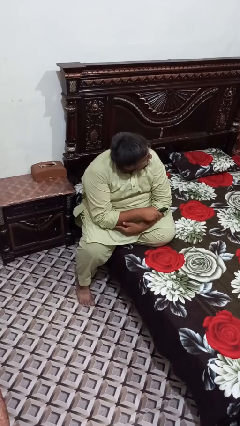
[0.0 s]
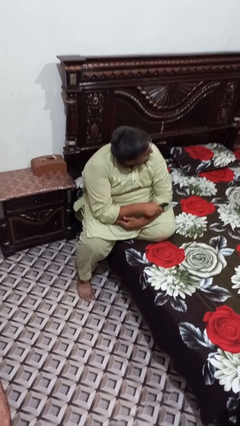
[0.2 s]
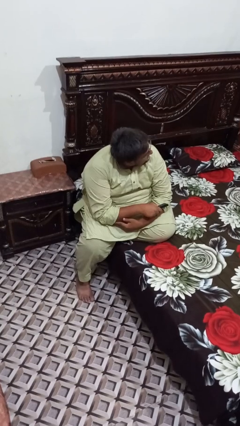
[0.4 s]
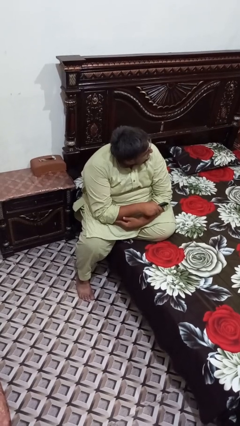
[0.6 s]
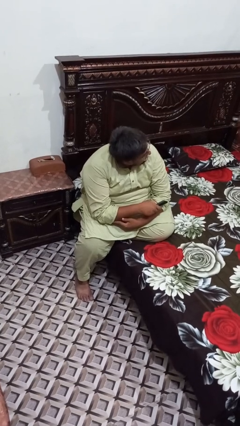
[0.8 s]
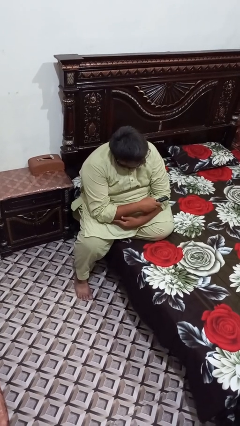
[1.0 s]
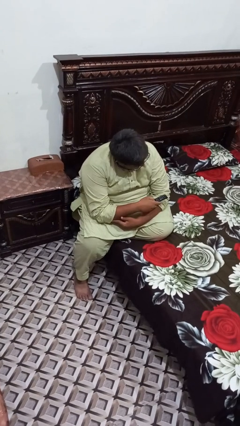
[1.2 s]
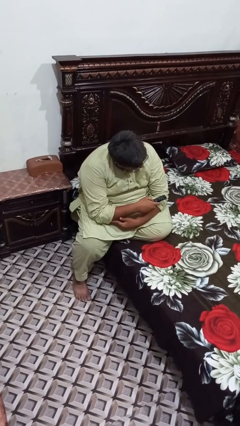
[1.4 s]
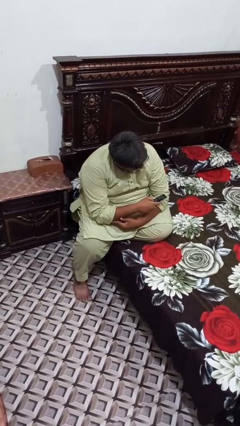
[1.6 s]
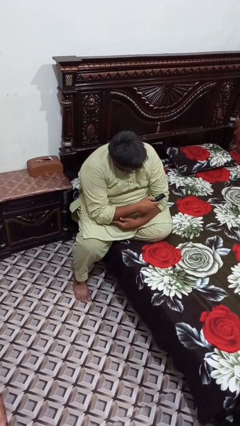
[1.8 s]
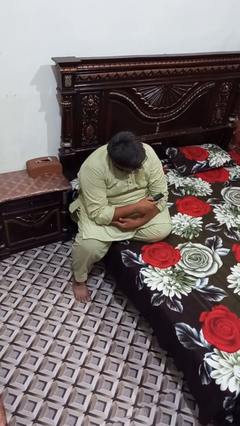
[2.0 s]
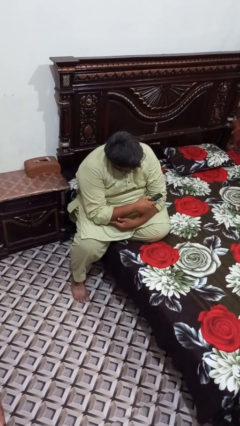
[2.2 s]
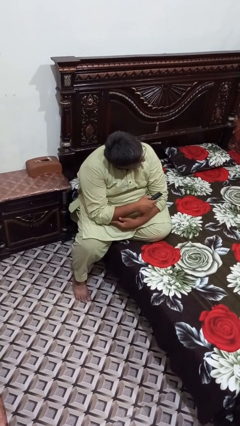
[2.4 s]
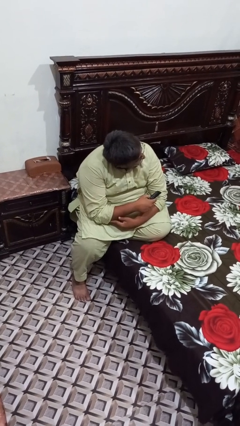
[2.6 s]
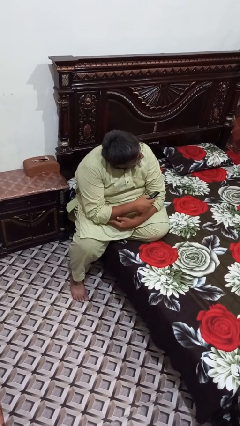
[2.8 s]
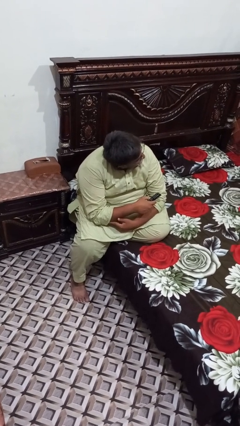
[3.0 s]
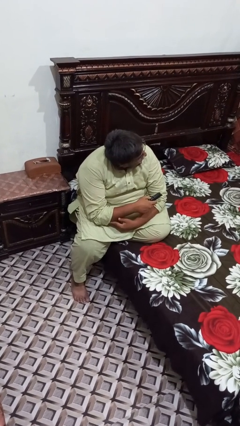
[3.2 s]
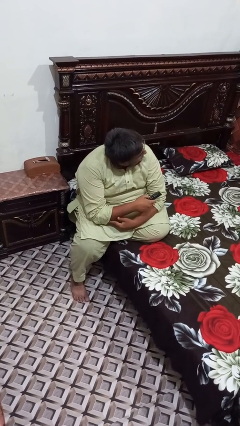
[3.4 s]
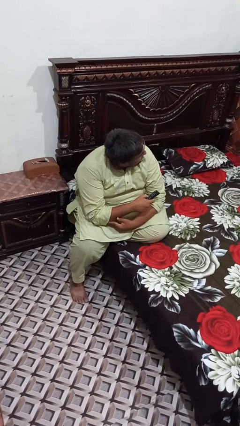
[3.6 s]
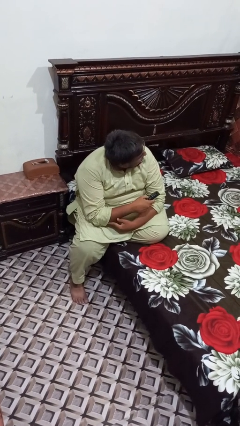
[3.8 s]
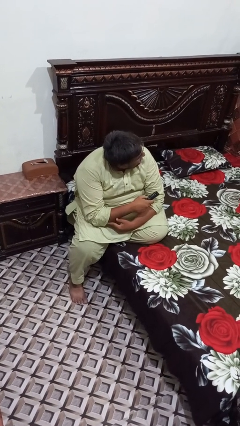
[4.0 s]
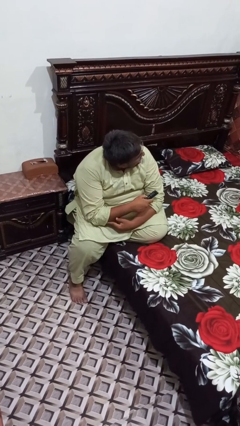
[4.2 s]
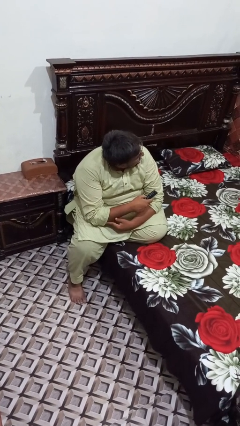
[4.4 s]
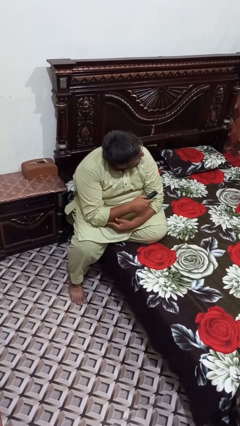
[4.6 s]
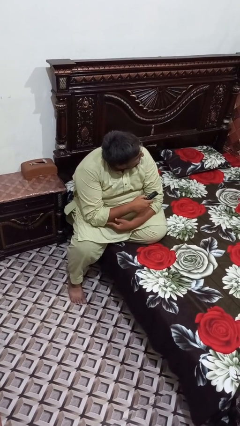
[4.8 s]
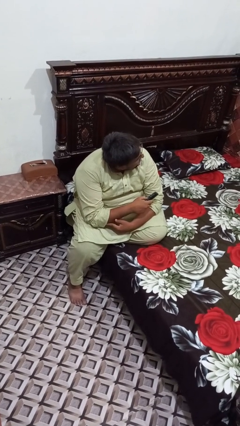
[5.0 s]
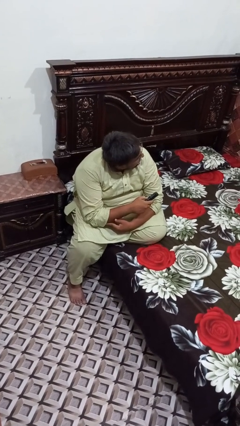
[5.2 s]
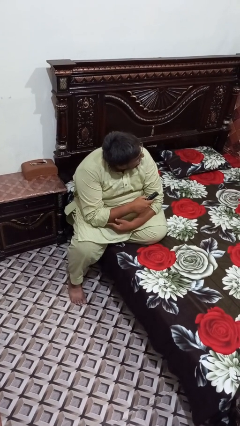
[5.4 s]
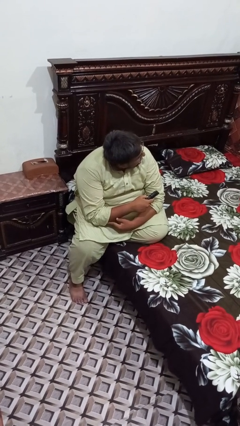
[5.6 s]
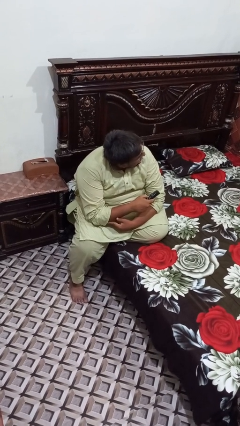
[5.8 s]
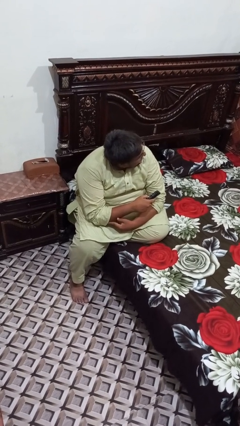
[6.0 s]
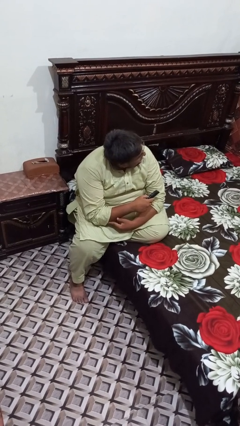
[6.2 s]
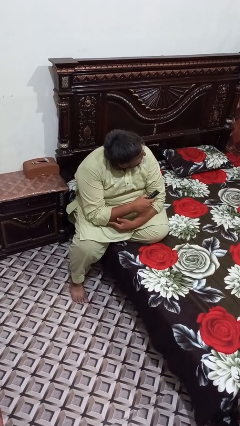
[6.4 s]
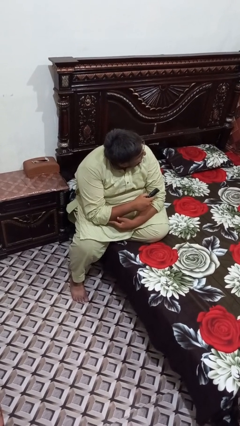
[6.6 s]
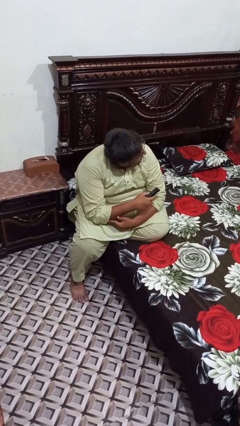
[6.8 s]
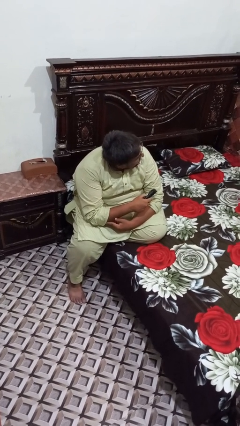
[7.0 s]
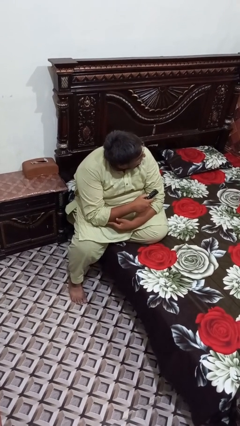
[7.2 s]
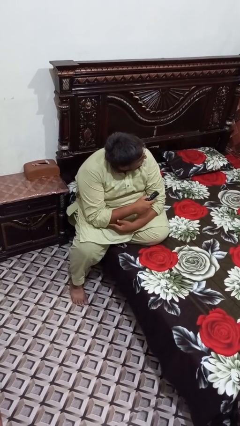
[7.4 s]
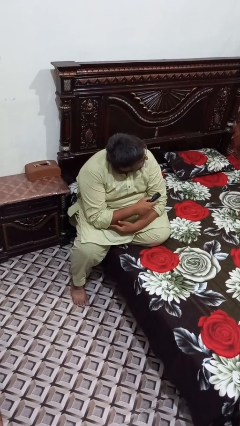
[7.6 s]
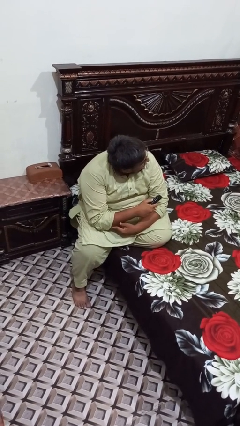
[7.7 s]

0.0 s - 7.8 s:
person uses television remote

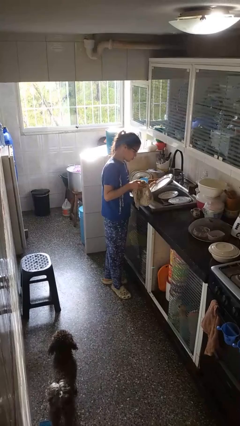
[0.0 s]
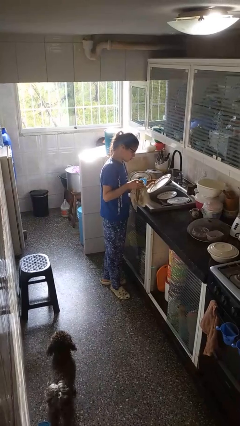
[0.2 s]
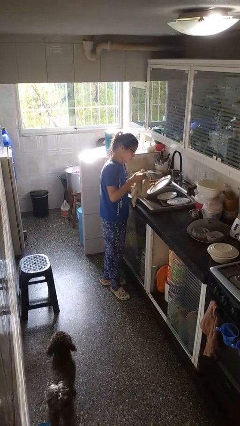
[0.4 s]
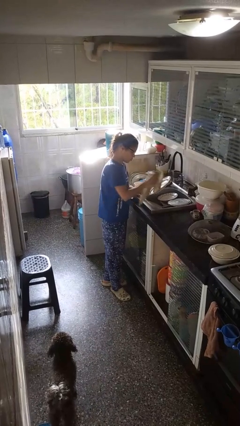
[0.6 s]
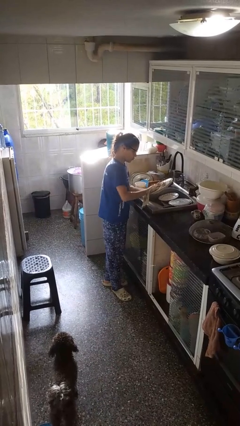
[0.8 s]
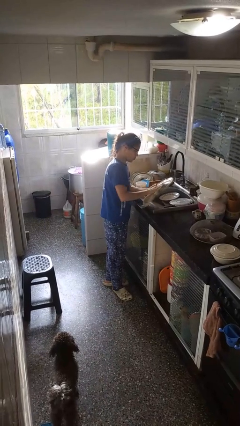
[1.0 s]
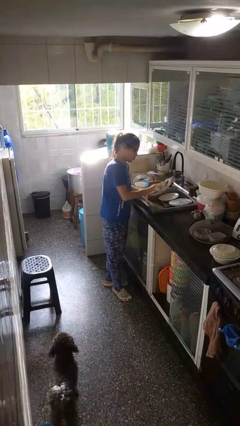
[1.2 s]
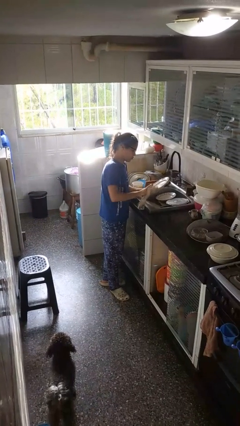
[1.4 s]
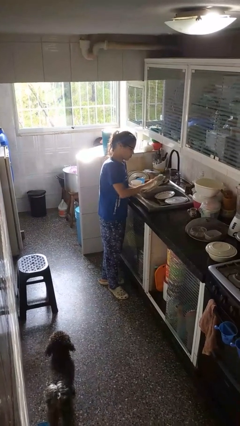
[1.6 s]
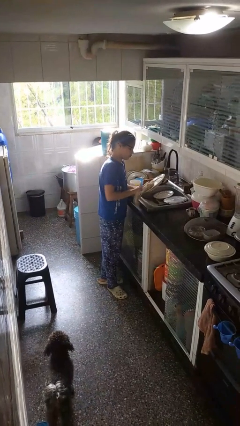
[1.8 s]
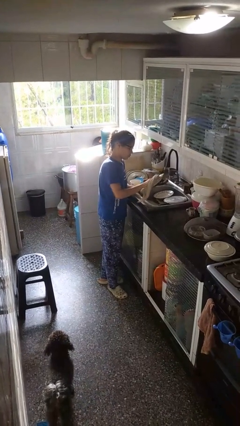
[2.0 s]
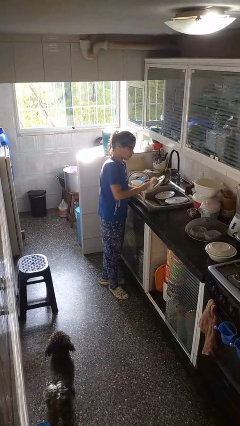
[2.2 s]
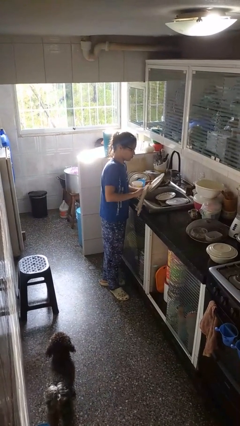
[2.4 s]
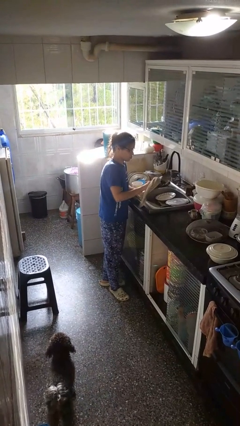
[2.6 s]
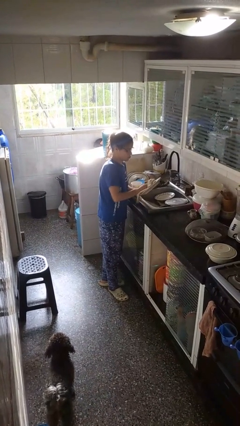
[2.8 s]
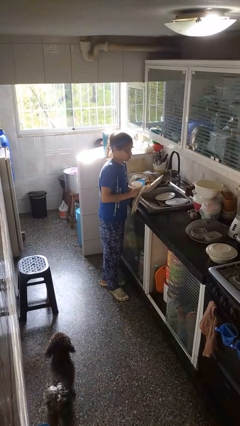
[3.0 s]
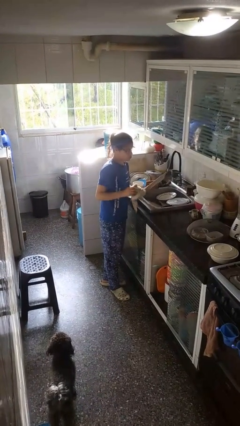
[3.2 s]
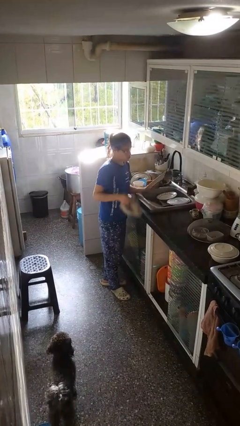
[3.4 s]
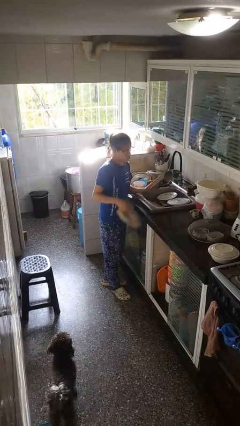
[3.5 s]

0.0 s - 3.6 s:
person dries dish

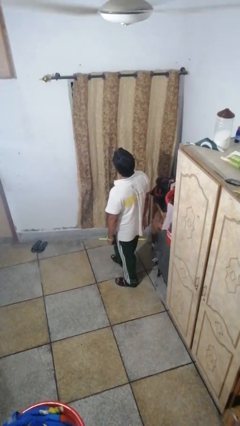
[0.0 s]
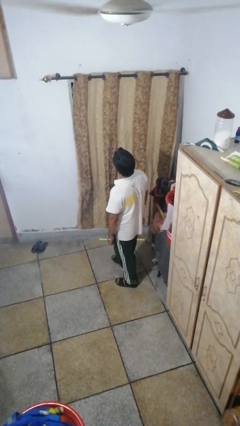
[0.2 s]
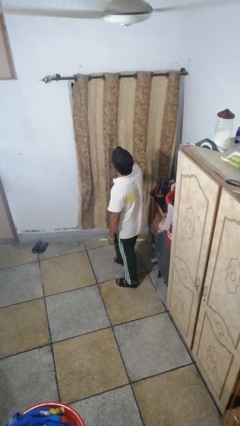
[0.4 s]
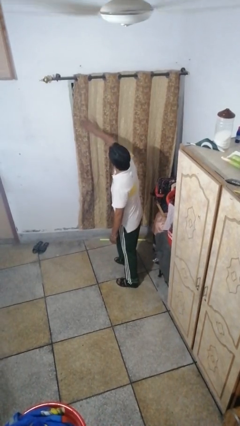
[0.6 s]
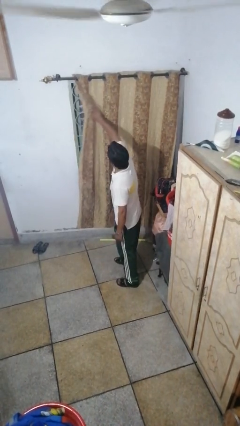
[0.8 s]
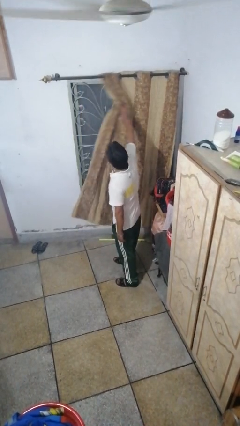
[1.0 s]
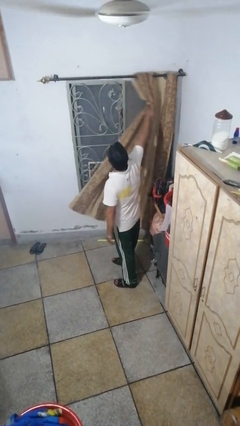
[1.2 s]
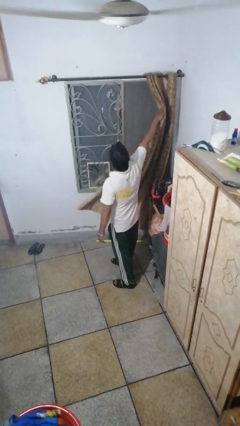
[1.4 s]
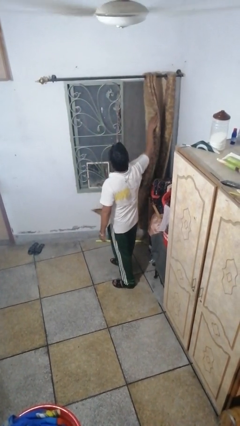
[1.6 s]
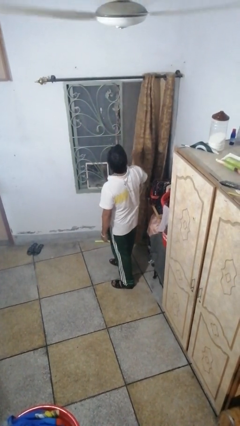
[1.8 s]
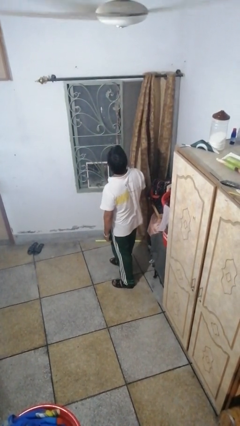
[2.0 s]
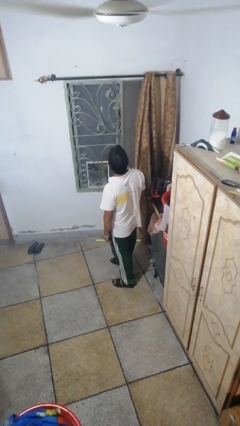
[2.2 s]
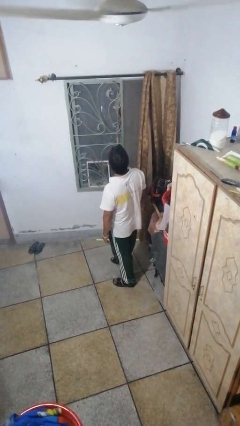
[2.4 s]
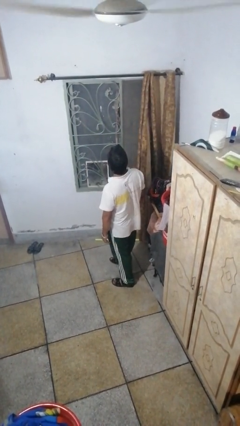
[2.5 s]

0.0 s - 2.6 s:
person opens curtains

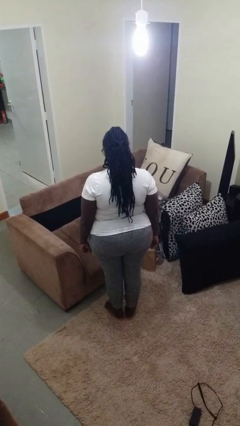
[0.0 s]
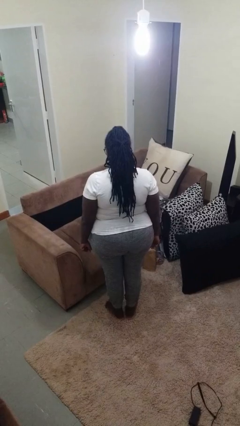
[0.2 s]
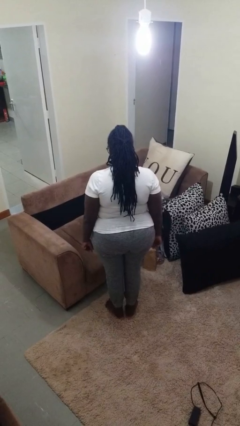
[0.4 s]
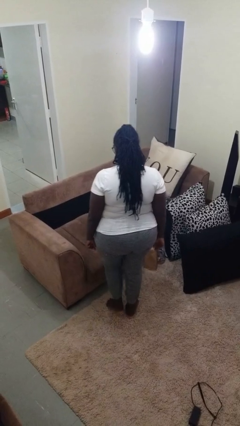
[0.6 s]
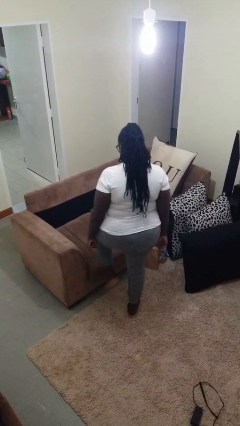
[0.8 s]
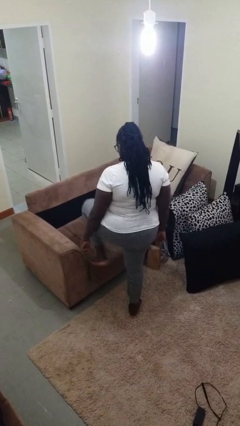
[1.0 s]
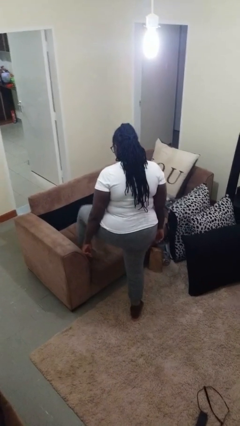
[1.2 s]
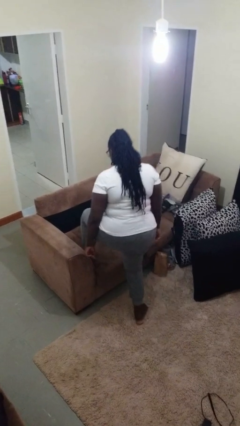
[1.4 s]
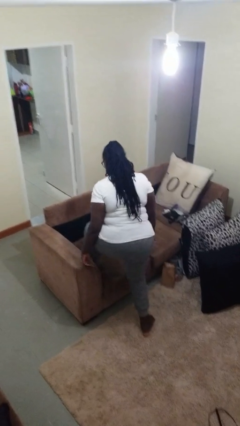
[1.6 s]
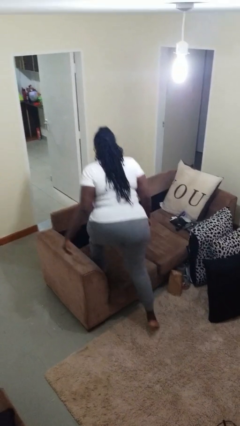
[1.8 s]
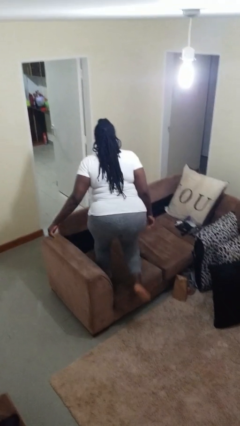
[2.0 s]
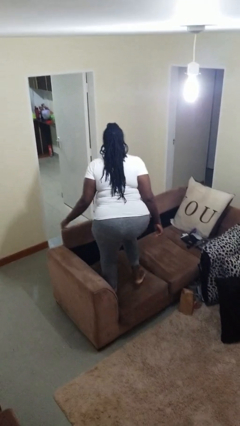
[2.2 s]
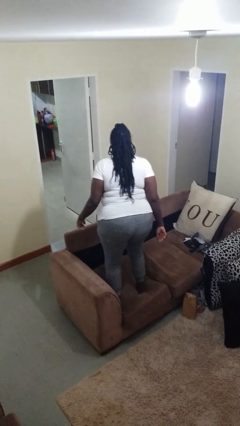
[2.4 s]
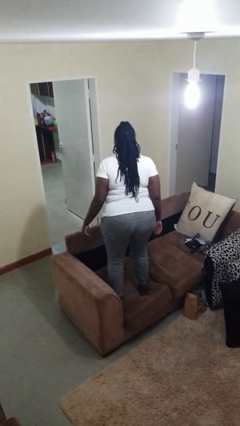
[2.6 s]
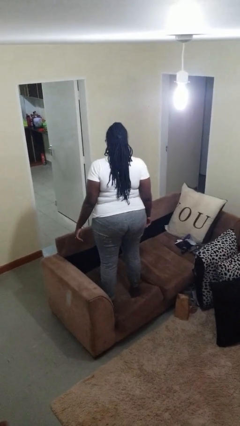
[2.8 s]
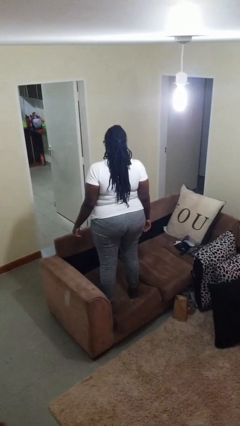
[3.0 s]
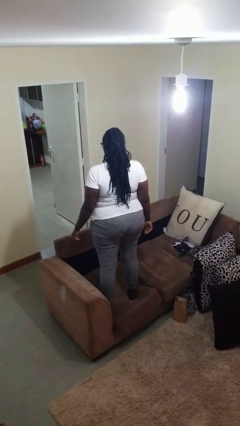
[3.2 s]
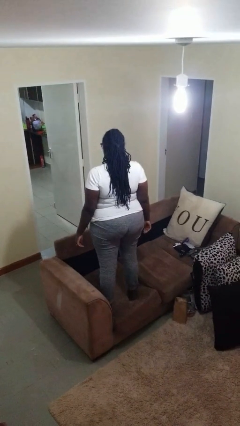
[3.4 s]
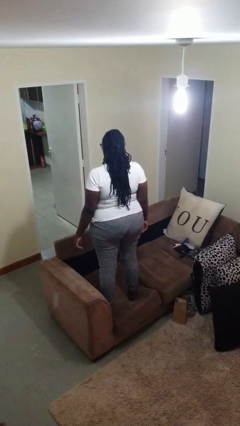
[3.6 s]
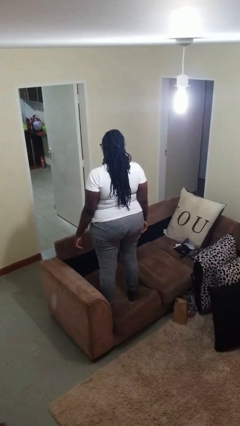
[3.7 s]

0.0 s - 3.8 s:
person climbs on couch

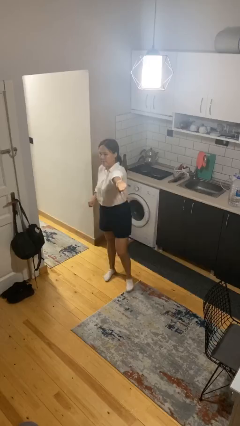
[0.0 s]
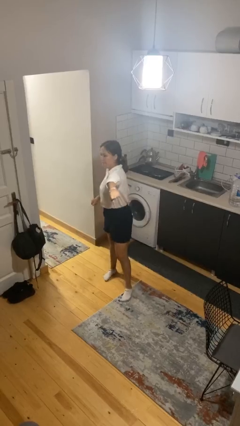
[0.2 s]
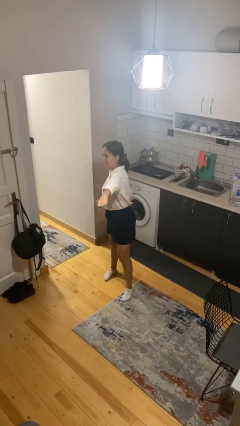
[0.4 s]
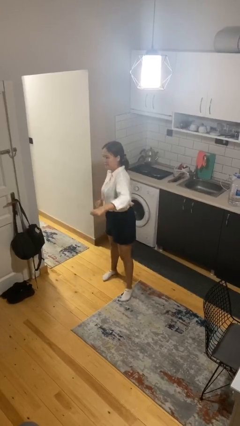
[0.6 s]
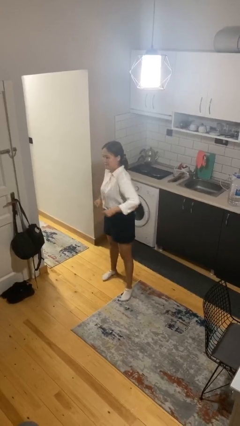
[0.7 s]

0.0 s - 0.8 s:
person karate chop
